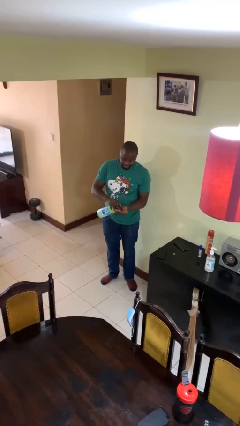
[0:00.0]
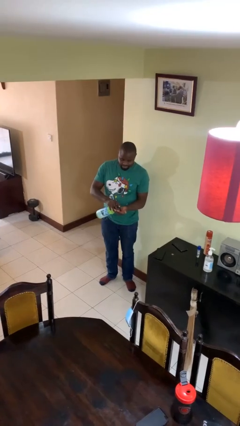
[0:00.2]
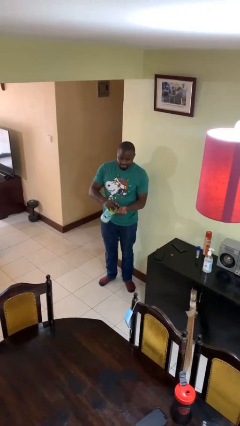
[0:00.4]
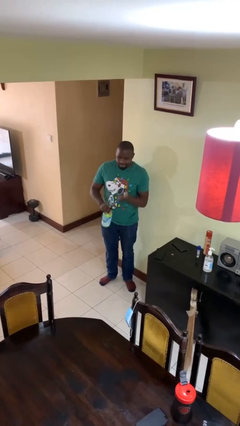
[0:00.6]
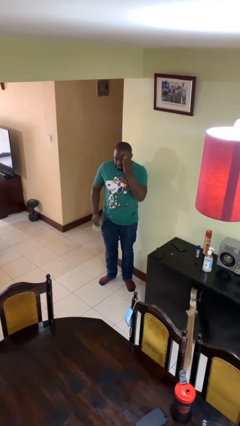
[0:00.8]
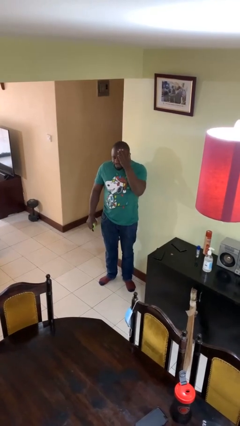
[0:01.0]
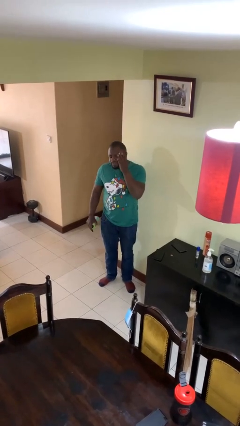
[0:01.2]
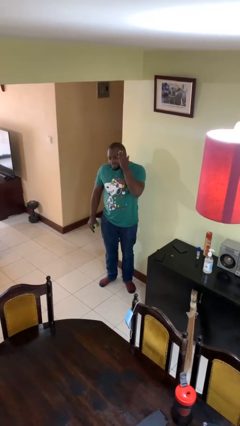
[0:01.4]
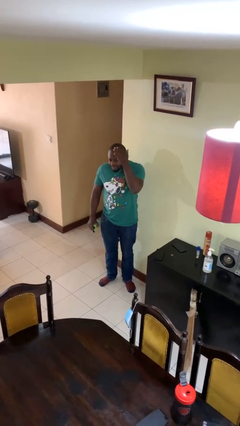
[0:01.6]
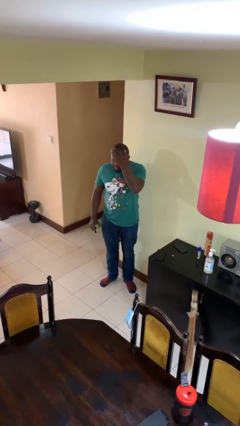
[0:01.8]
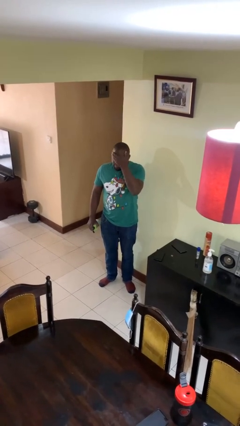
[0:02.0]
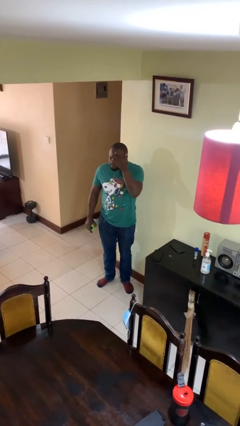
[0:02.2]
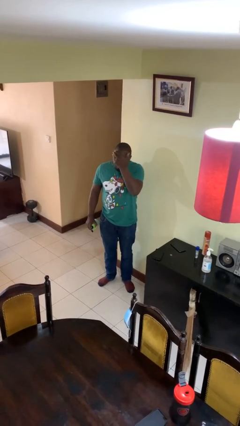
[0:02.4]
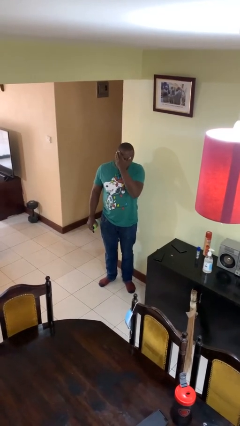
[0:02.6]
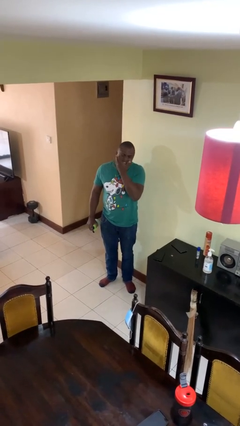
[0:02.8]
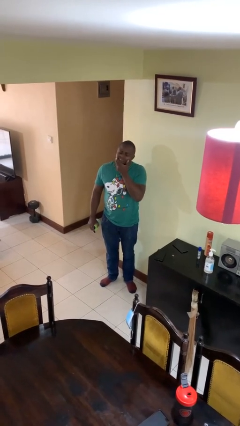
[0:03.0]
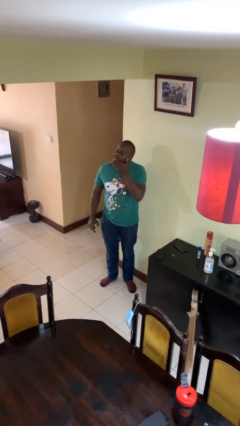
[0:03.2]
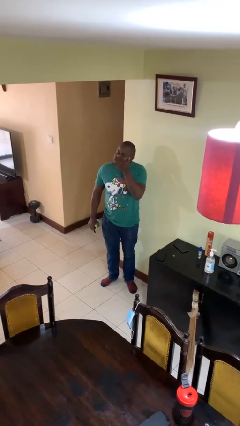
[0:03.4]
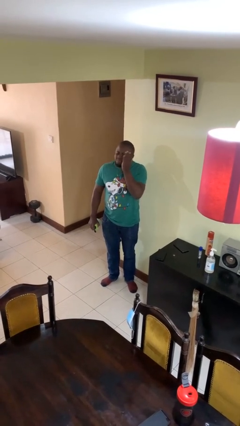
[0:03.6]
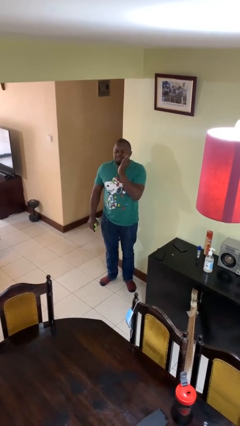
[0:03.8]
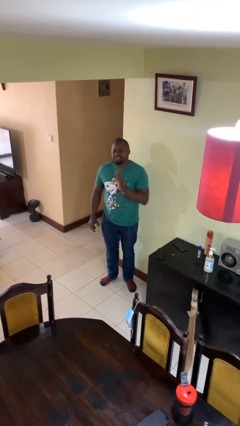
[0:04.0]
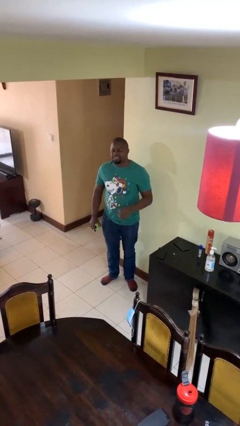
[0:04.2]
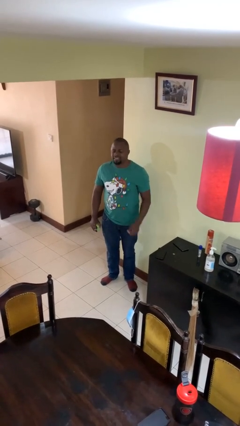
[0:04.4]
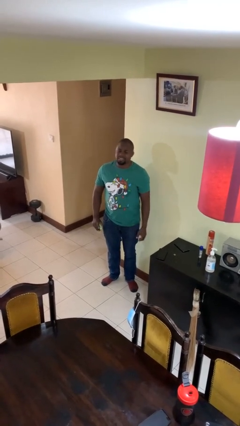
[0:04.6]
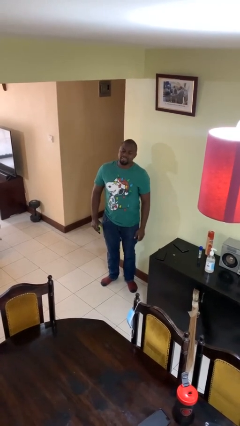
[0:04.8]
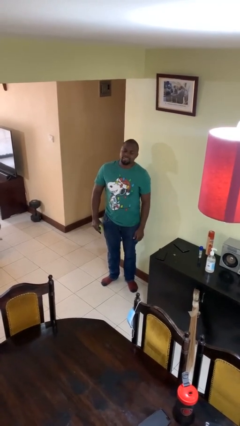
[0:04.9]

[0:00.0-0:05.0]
person applies facial moisturizer

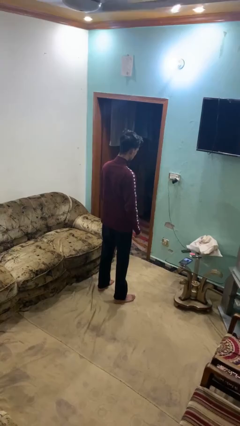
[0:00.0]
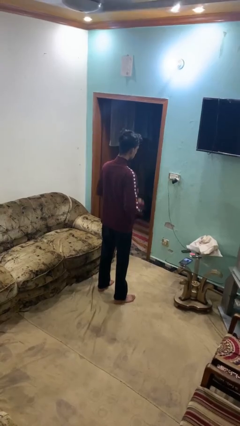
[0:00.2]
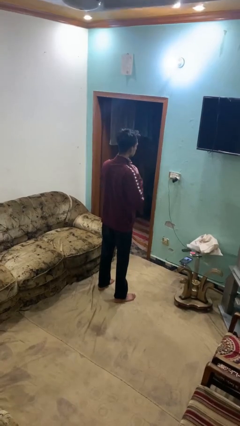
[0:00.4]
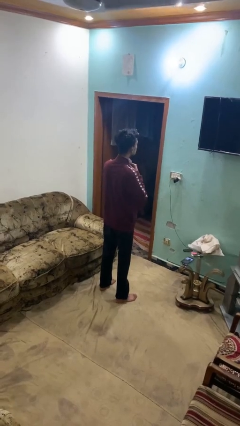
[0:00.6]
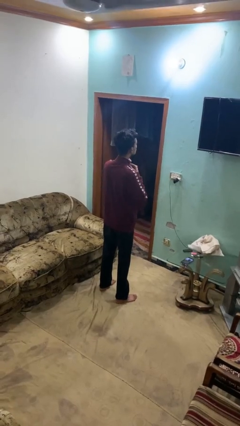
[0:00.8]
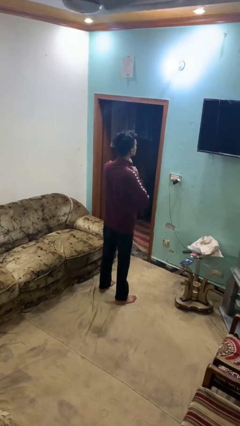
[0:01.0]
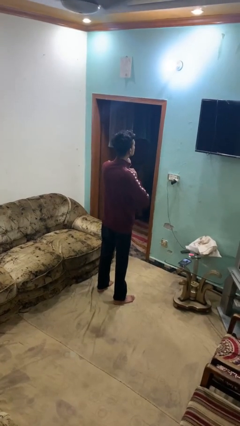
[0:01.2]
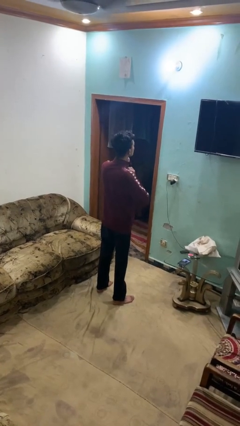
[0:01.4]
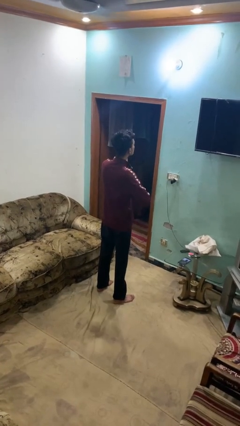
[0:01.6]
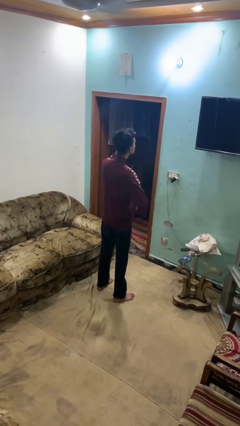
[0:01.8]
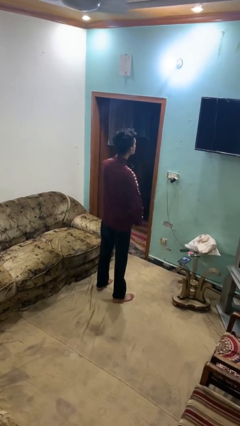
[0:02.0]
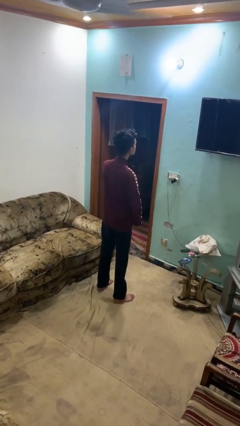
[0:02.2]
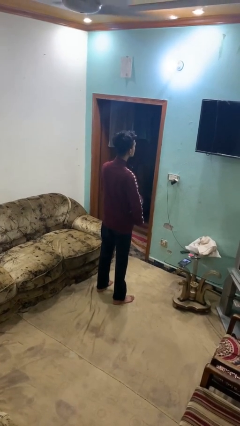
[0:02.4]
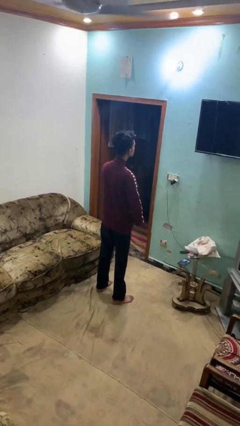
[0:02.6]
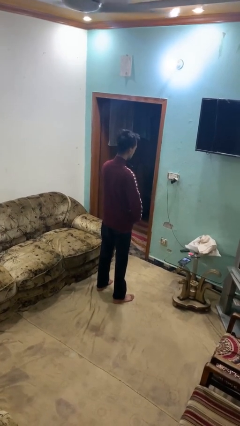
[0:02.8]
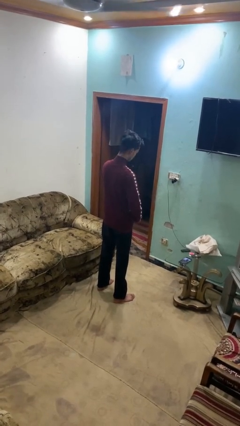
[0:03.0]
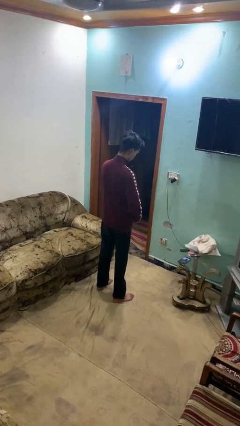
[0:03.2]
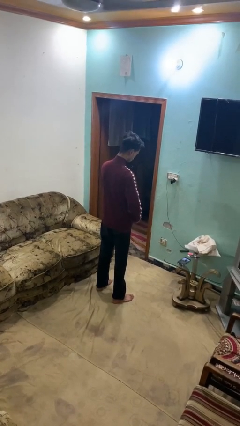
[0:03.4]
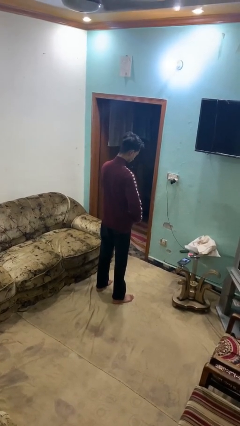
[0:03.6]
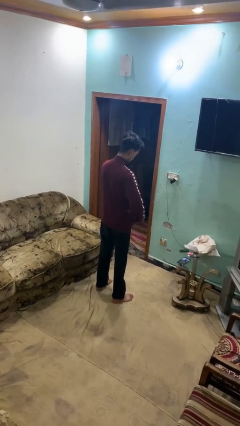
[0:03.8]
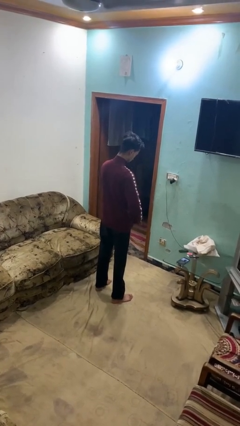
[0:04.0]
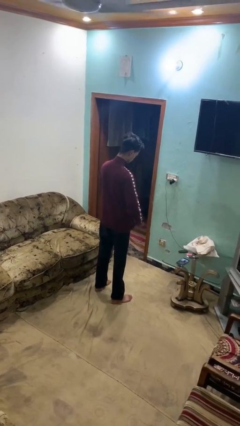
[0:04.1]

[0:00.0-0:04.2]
person unzips jacket

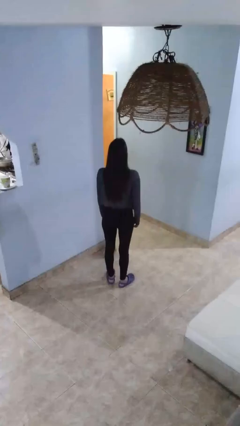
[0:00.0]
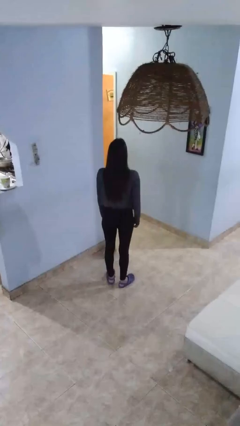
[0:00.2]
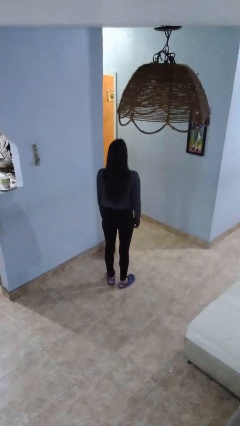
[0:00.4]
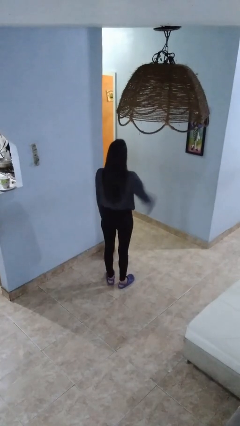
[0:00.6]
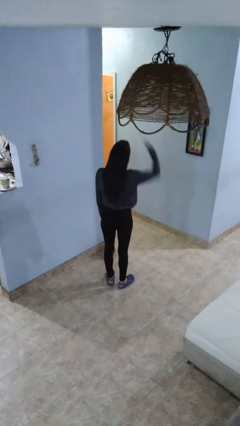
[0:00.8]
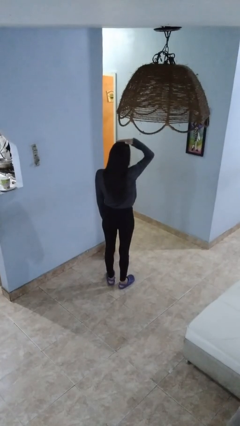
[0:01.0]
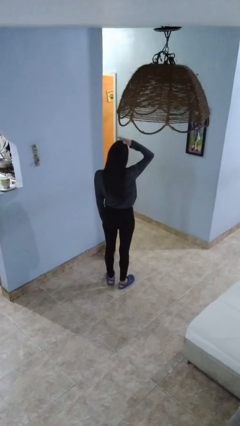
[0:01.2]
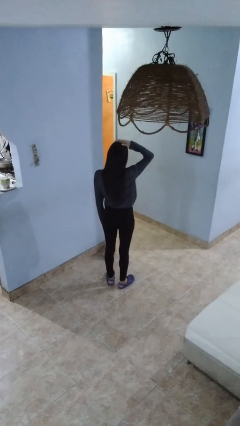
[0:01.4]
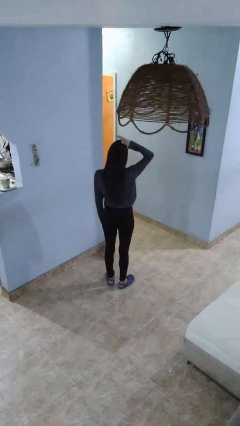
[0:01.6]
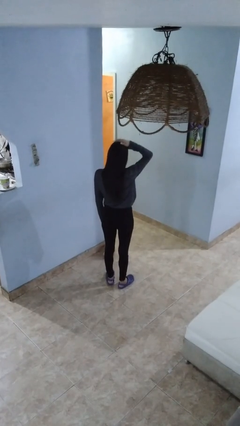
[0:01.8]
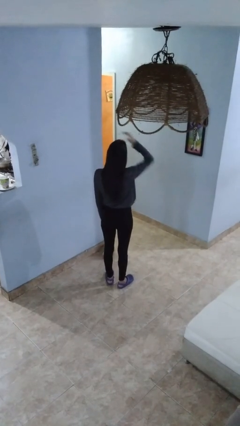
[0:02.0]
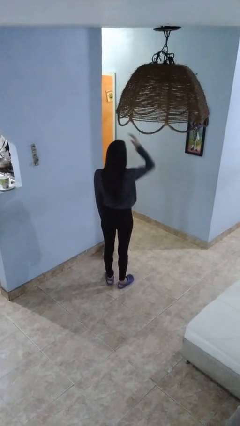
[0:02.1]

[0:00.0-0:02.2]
person pats head

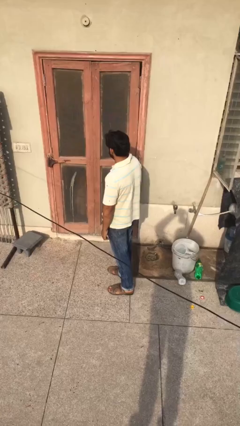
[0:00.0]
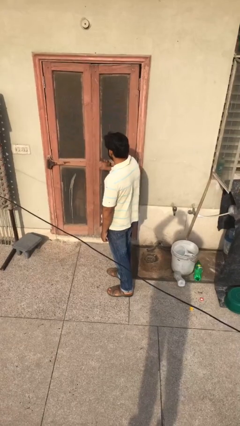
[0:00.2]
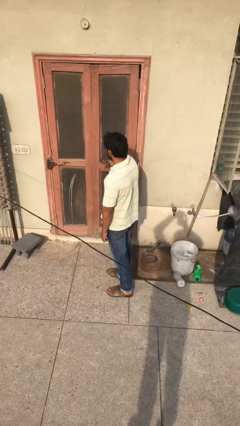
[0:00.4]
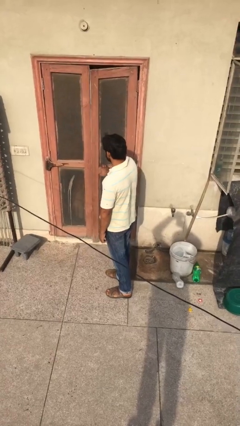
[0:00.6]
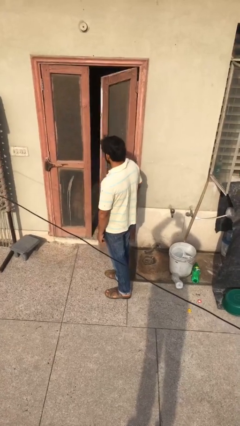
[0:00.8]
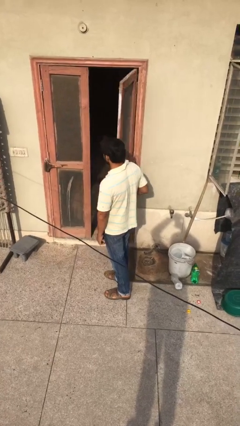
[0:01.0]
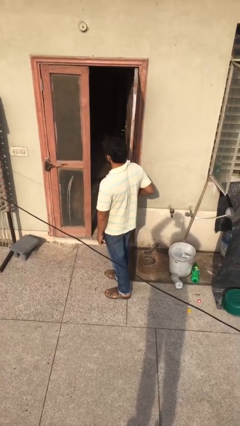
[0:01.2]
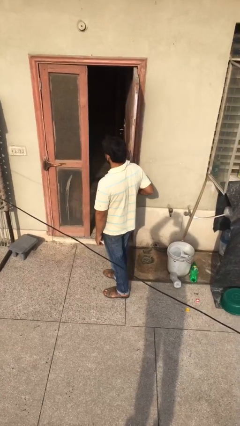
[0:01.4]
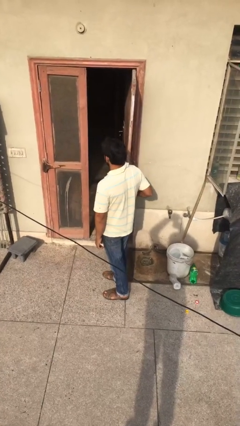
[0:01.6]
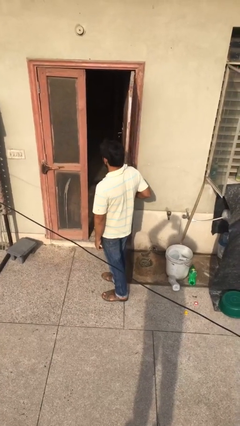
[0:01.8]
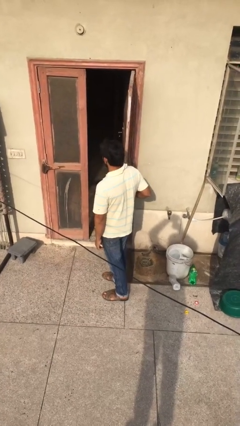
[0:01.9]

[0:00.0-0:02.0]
person opens facility door

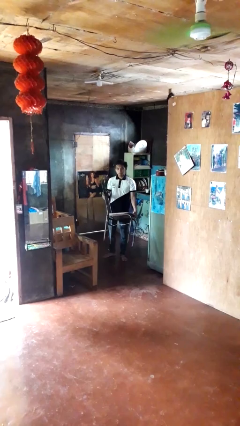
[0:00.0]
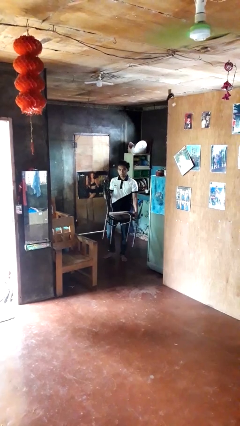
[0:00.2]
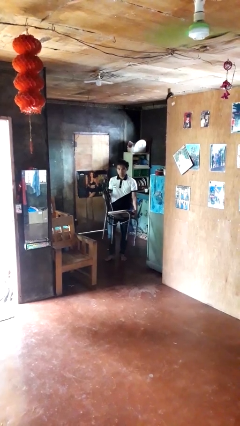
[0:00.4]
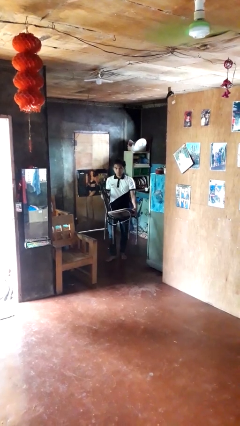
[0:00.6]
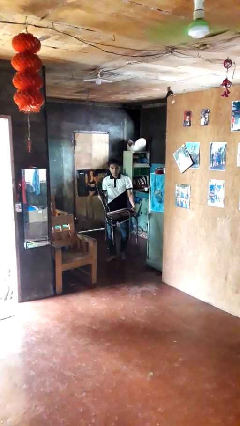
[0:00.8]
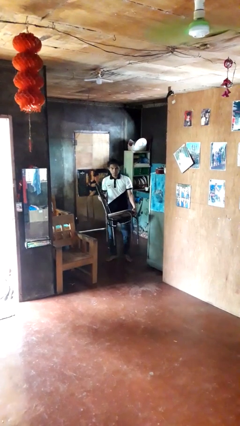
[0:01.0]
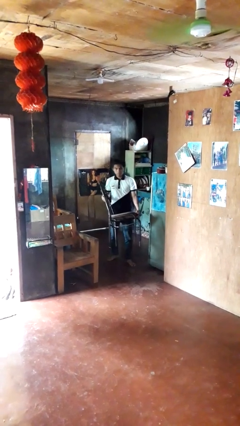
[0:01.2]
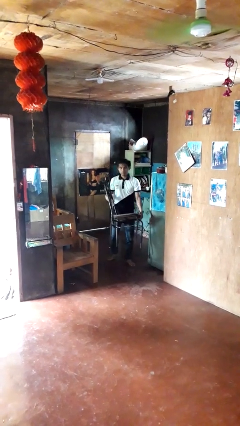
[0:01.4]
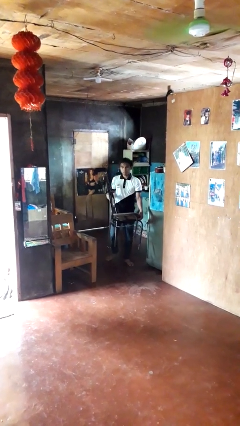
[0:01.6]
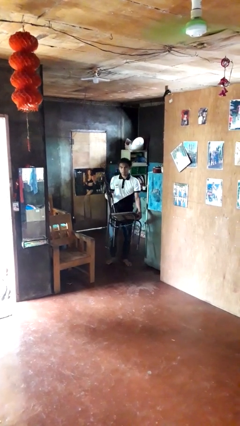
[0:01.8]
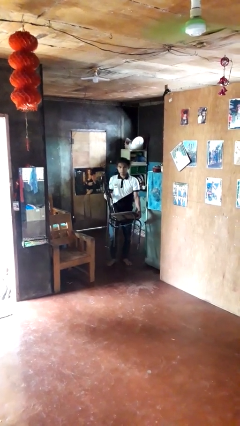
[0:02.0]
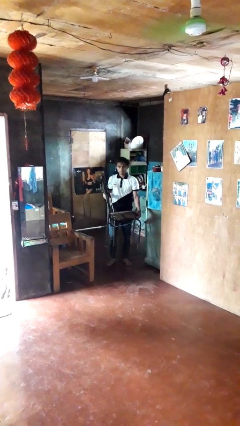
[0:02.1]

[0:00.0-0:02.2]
person carries furniture

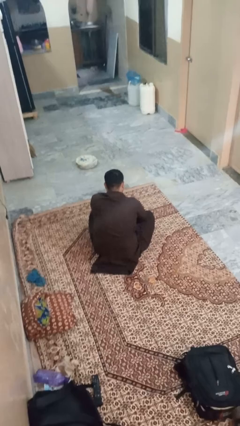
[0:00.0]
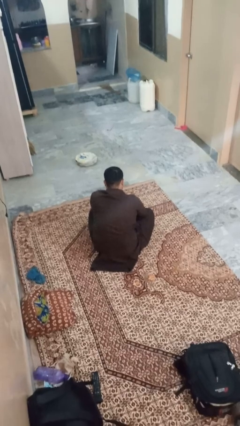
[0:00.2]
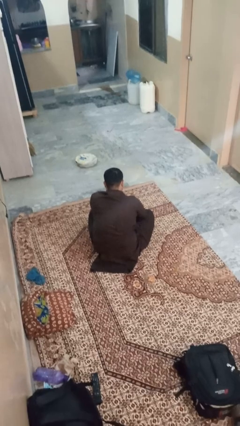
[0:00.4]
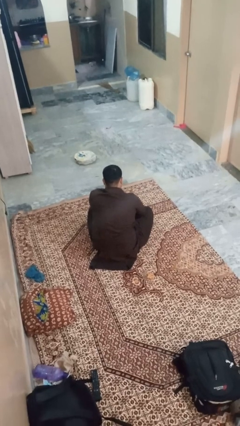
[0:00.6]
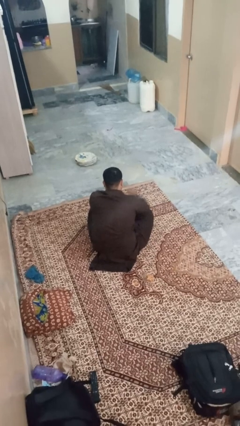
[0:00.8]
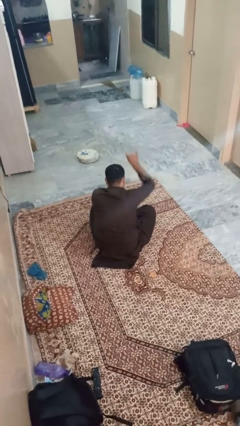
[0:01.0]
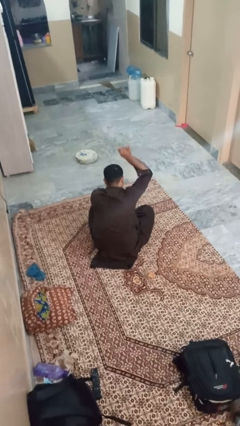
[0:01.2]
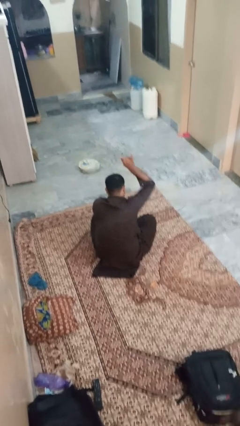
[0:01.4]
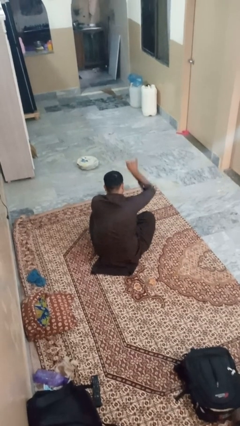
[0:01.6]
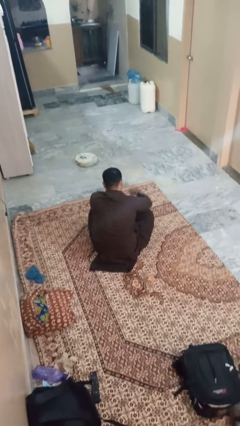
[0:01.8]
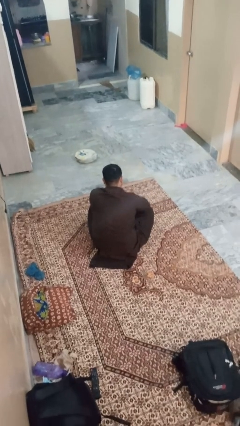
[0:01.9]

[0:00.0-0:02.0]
person gestures hang loose
